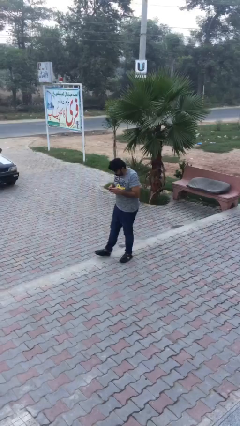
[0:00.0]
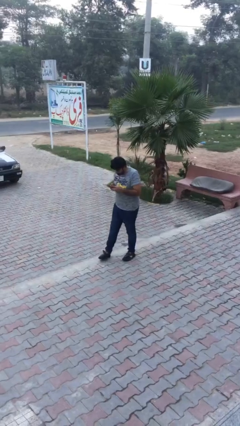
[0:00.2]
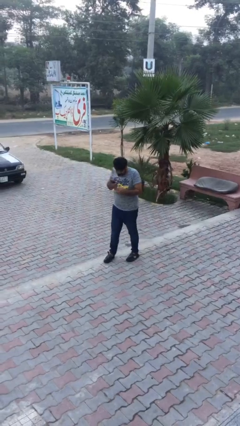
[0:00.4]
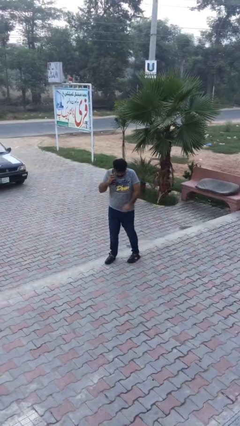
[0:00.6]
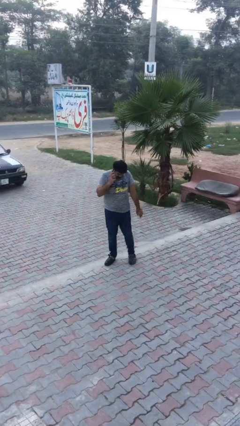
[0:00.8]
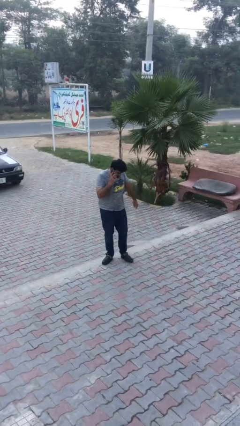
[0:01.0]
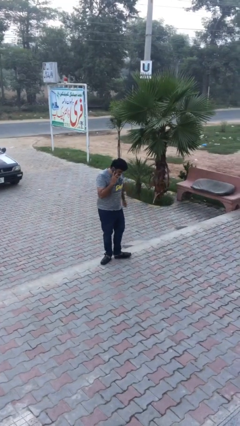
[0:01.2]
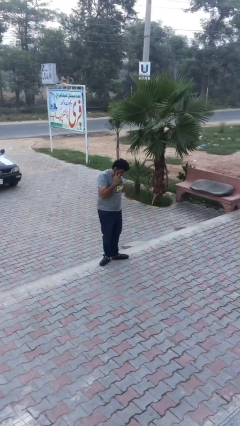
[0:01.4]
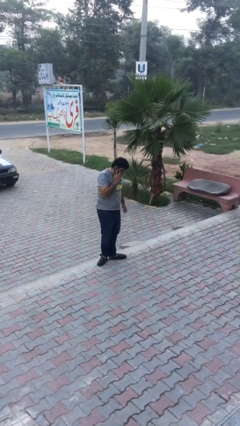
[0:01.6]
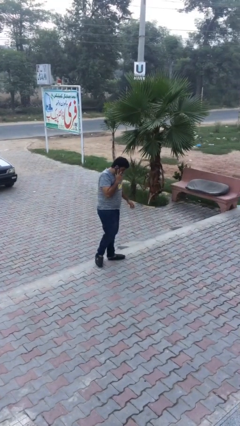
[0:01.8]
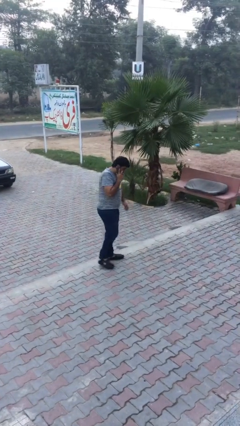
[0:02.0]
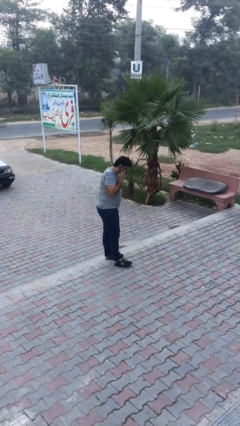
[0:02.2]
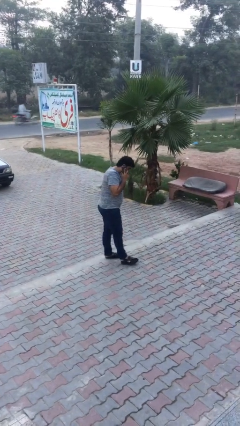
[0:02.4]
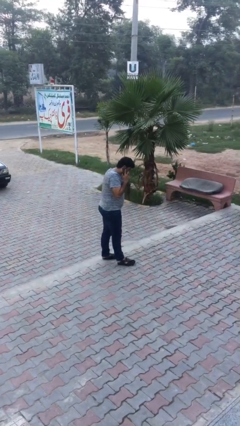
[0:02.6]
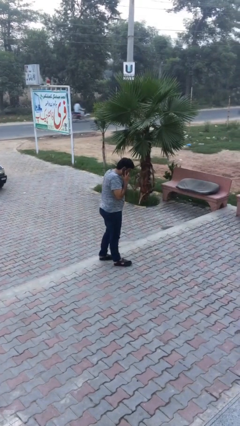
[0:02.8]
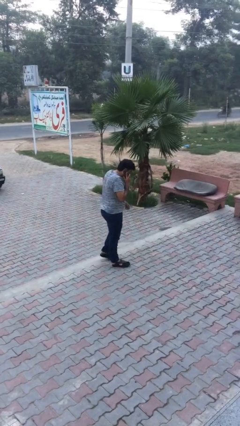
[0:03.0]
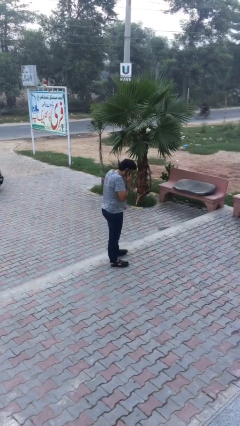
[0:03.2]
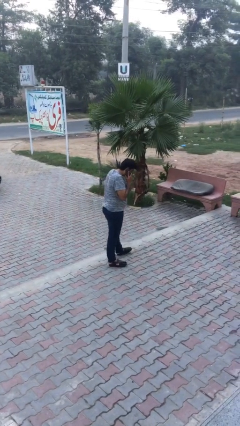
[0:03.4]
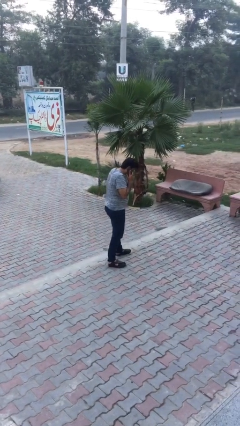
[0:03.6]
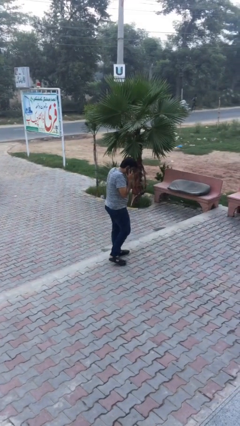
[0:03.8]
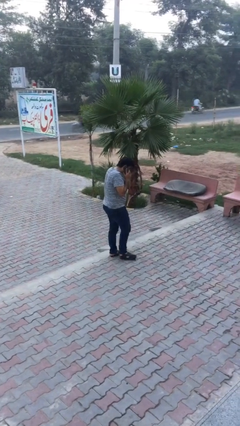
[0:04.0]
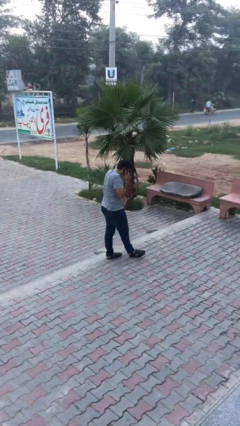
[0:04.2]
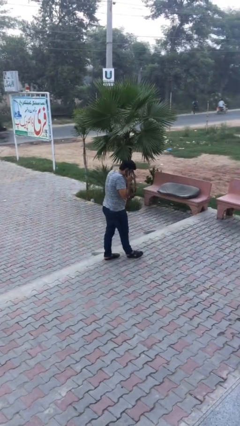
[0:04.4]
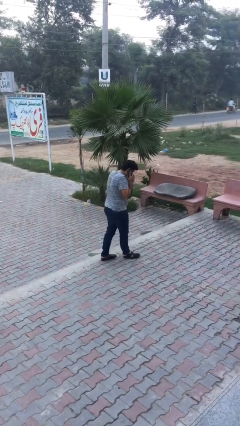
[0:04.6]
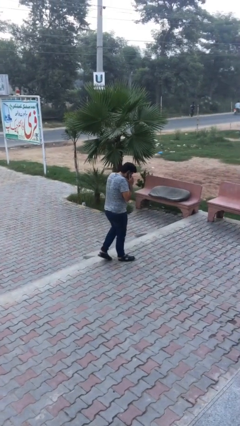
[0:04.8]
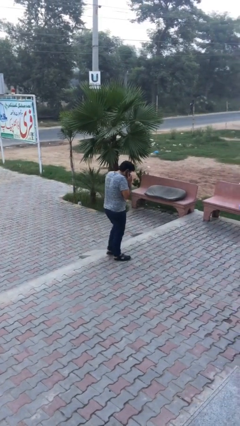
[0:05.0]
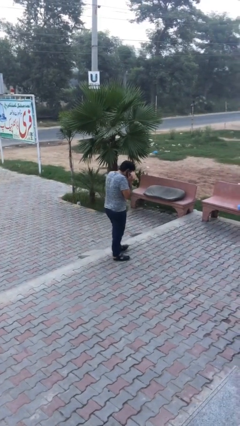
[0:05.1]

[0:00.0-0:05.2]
person talks on phone

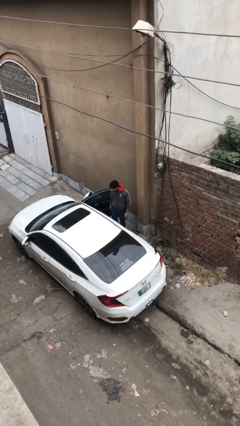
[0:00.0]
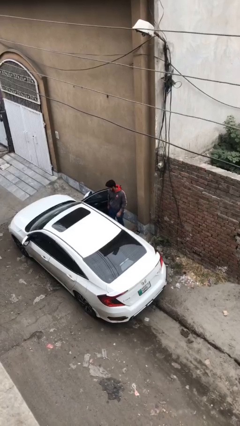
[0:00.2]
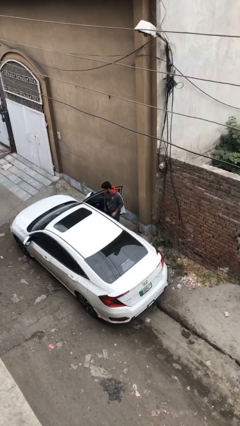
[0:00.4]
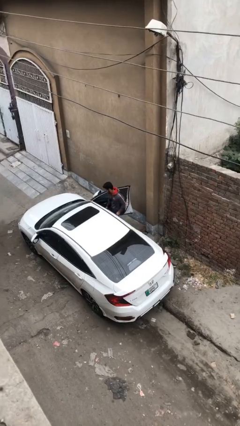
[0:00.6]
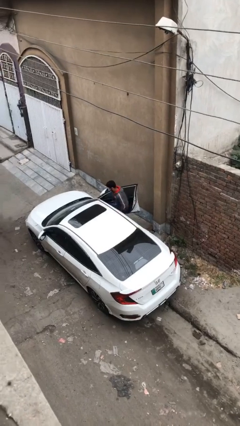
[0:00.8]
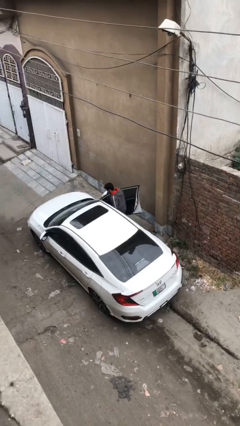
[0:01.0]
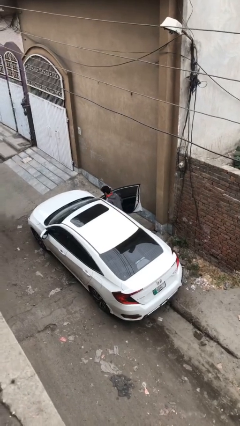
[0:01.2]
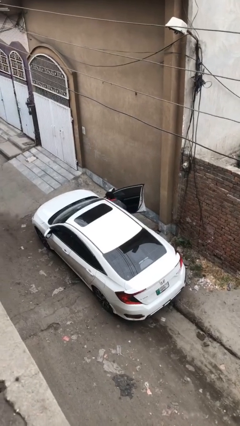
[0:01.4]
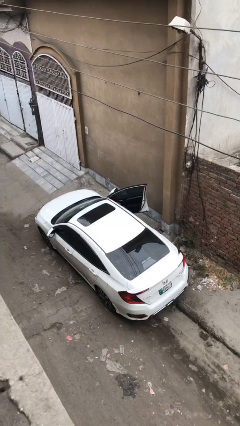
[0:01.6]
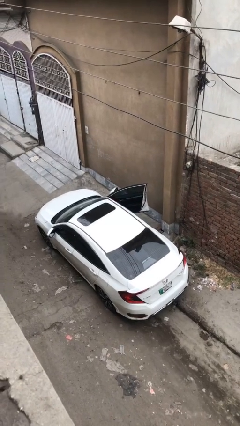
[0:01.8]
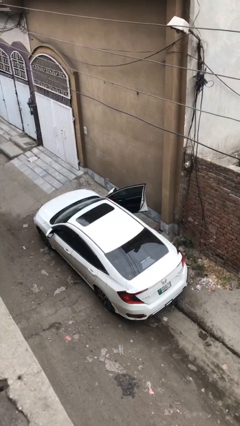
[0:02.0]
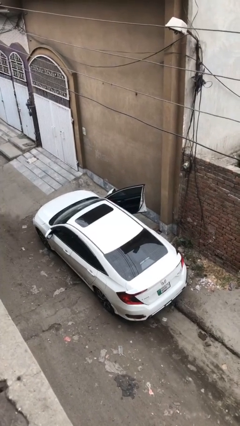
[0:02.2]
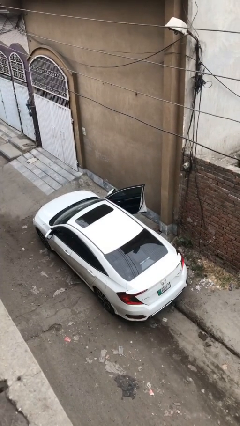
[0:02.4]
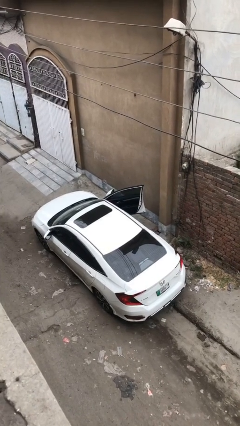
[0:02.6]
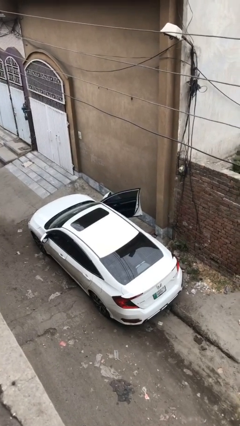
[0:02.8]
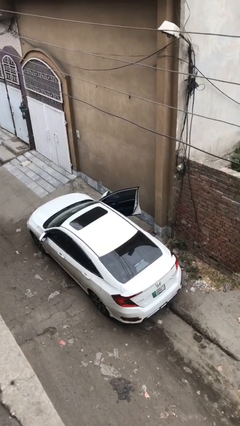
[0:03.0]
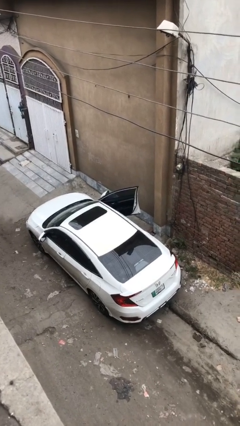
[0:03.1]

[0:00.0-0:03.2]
person enters car

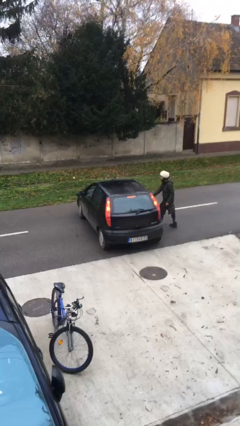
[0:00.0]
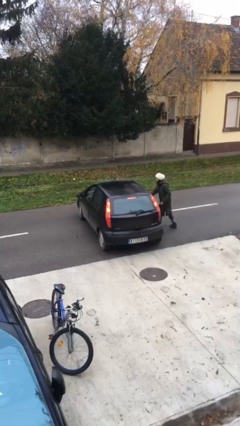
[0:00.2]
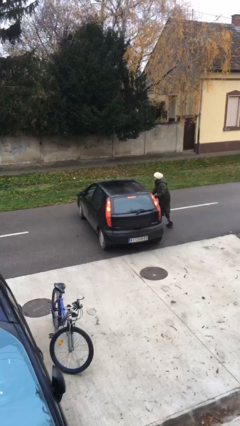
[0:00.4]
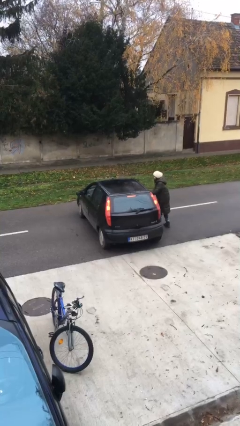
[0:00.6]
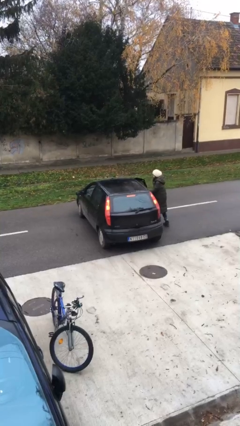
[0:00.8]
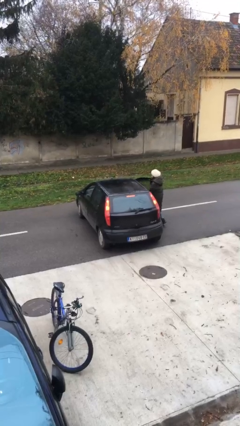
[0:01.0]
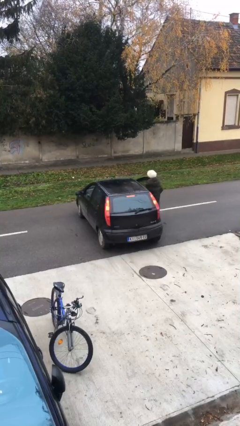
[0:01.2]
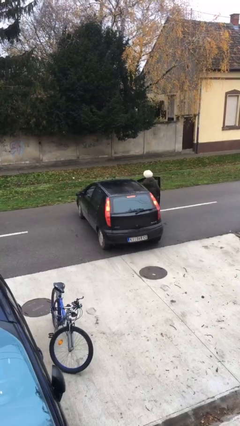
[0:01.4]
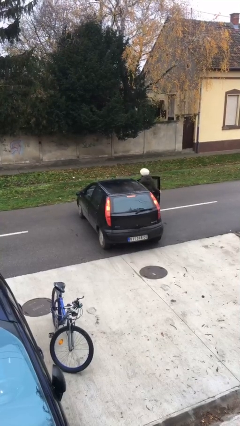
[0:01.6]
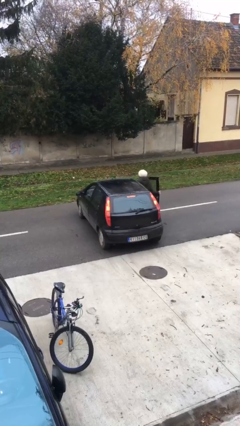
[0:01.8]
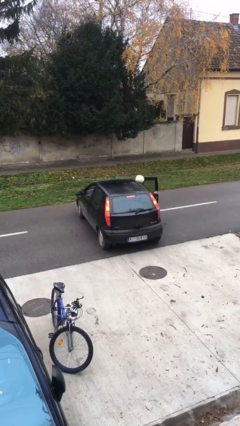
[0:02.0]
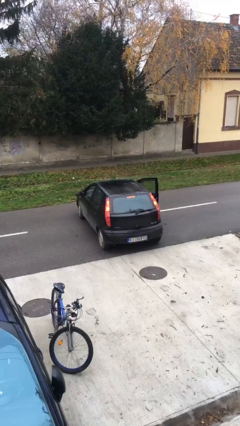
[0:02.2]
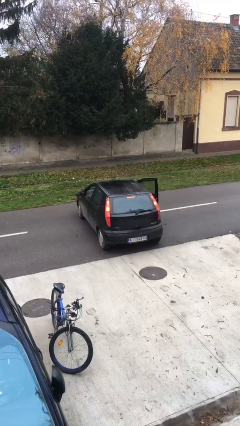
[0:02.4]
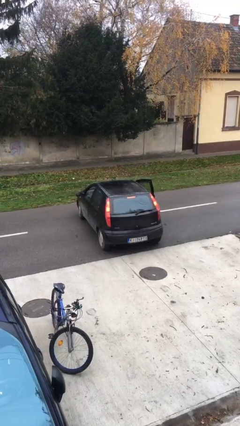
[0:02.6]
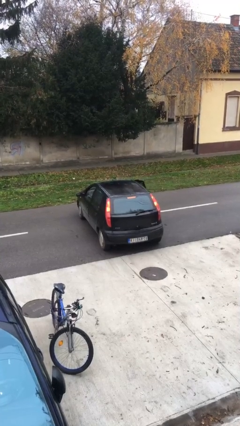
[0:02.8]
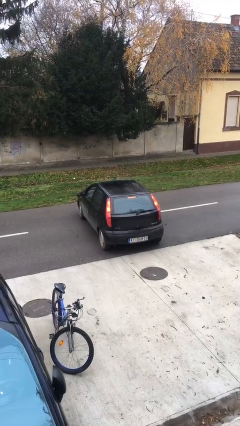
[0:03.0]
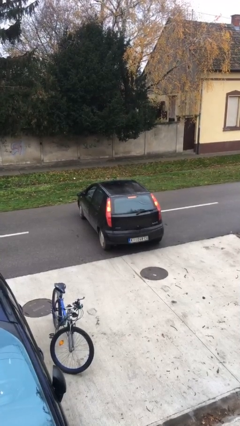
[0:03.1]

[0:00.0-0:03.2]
car picks up person

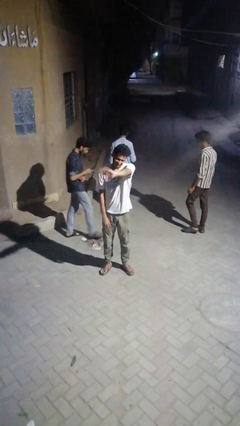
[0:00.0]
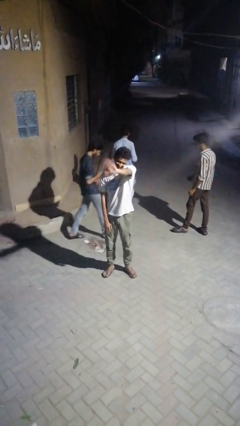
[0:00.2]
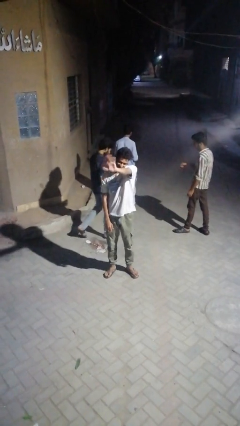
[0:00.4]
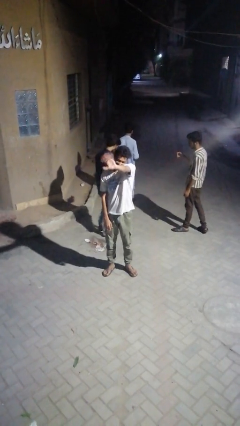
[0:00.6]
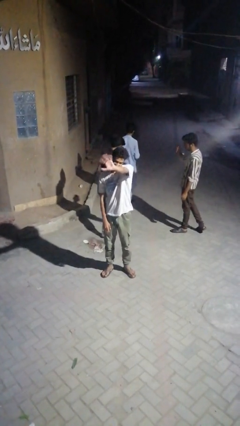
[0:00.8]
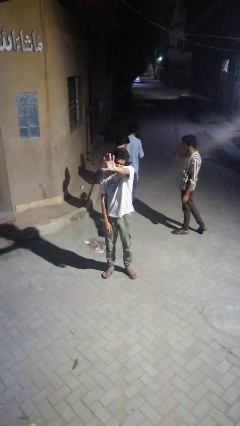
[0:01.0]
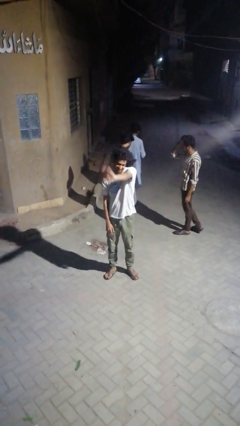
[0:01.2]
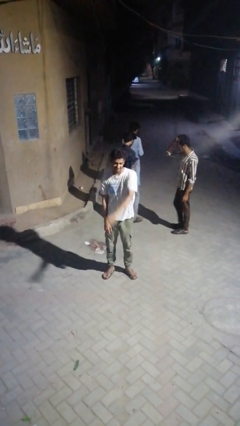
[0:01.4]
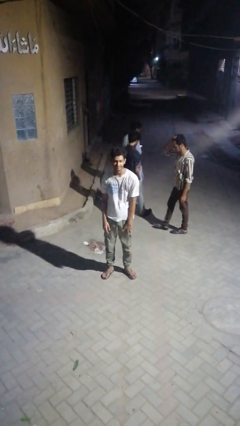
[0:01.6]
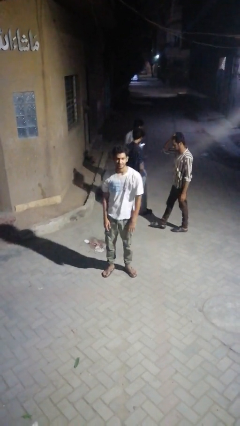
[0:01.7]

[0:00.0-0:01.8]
person waves at person

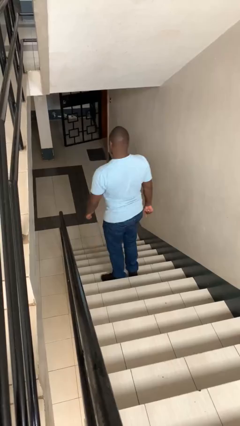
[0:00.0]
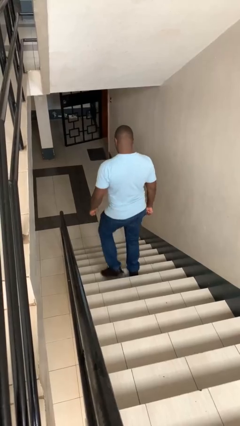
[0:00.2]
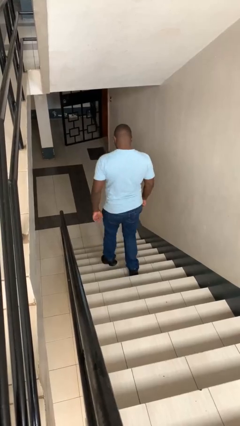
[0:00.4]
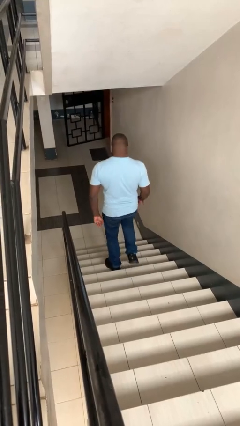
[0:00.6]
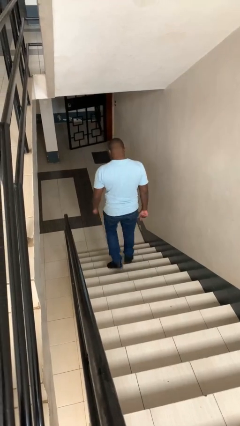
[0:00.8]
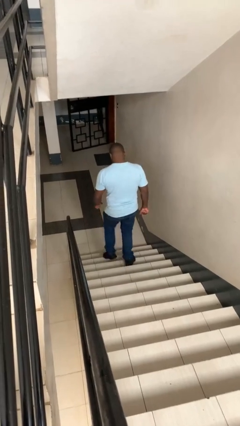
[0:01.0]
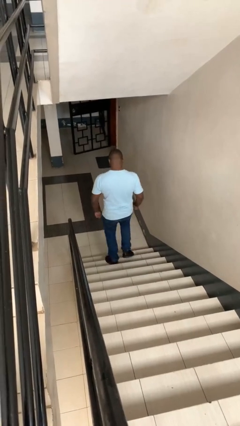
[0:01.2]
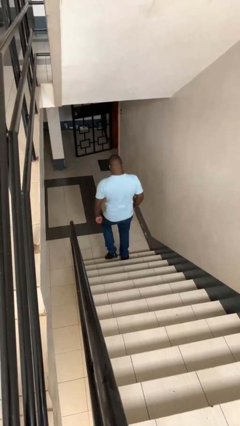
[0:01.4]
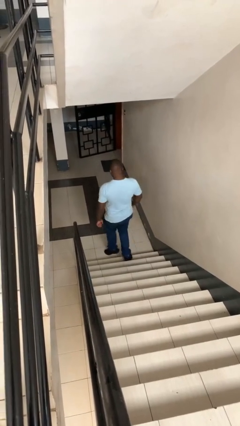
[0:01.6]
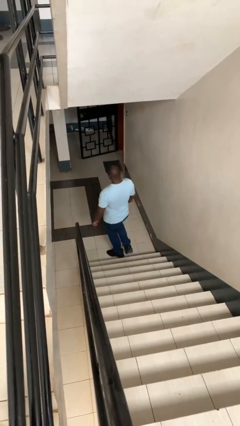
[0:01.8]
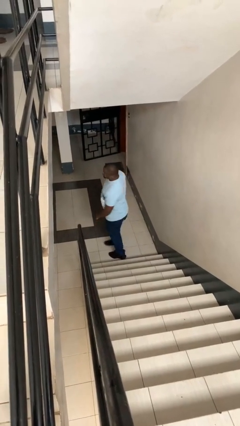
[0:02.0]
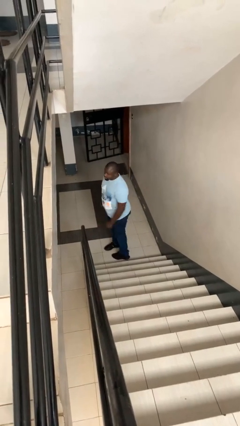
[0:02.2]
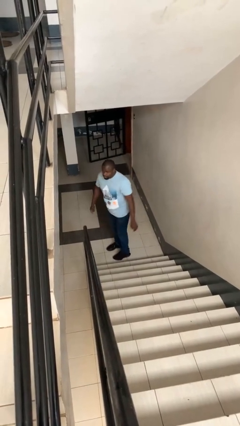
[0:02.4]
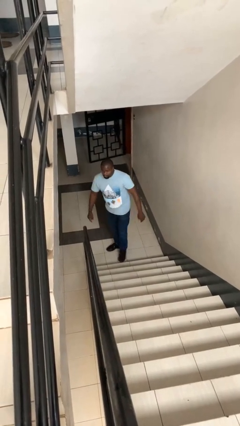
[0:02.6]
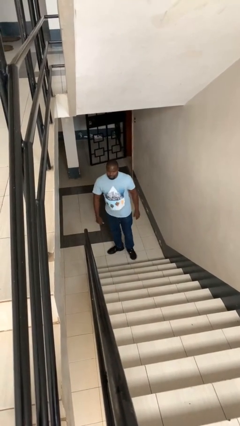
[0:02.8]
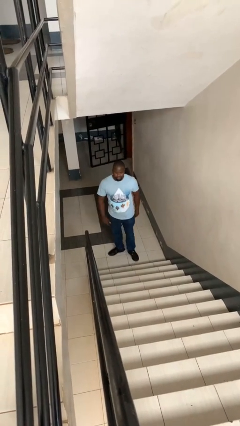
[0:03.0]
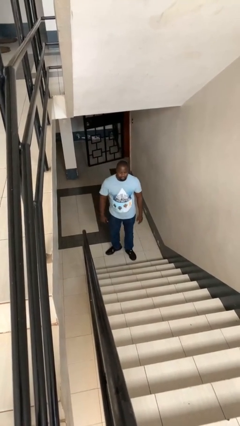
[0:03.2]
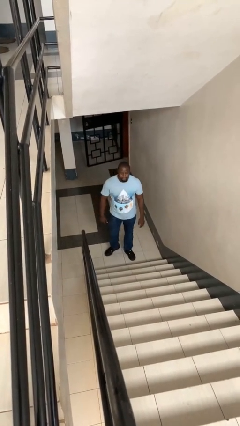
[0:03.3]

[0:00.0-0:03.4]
person climbs down stairs

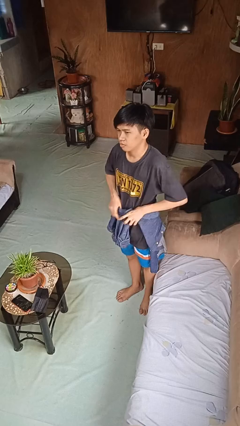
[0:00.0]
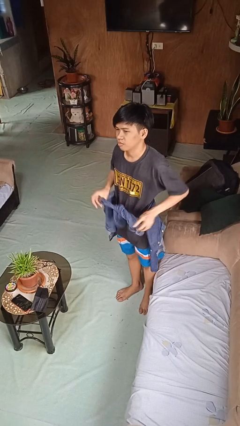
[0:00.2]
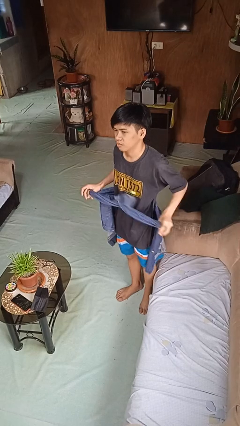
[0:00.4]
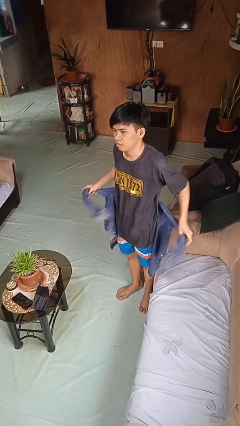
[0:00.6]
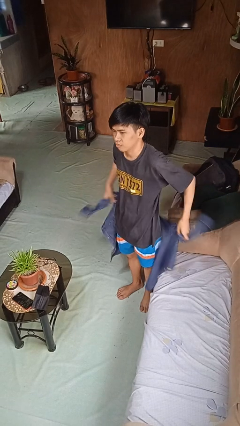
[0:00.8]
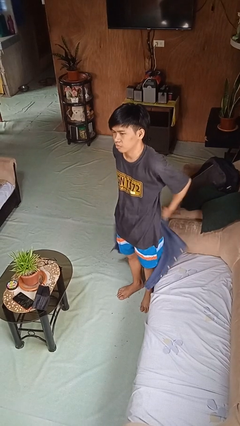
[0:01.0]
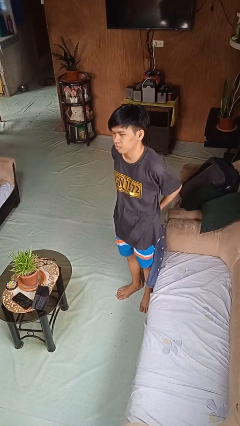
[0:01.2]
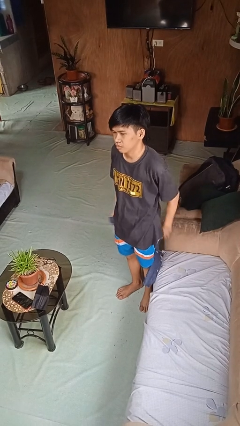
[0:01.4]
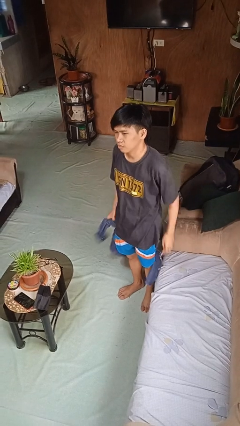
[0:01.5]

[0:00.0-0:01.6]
person unties jacket around waist
